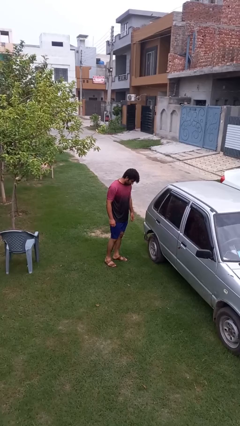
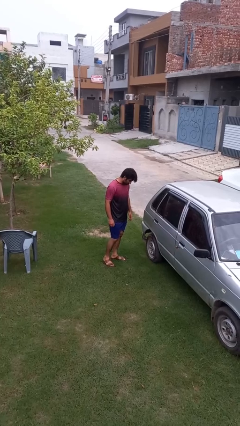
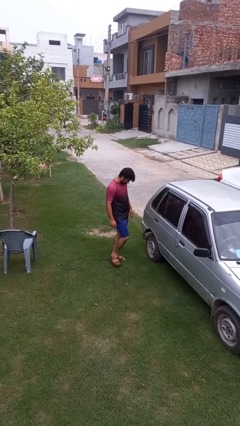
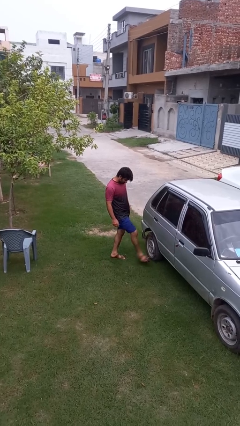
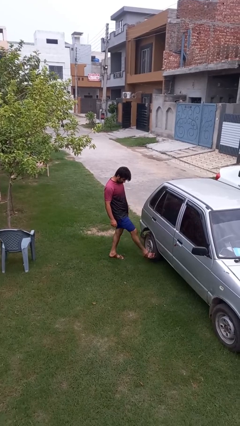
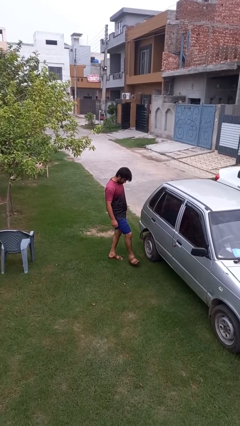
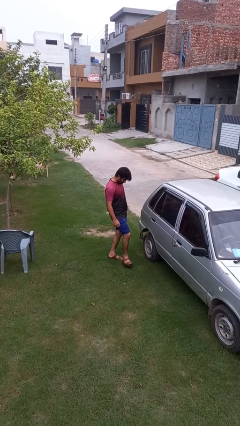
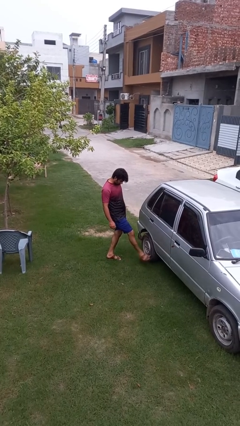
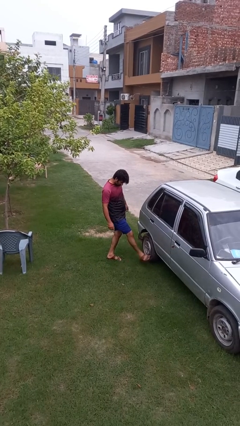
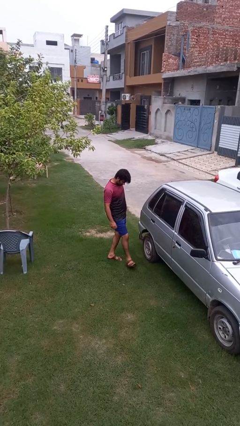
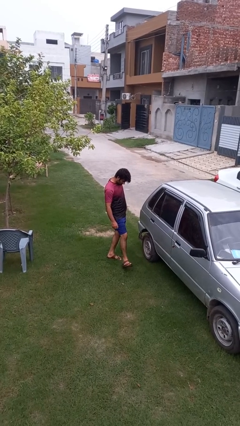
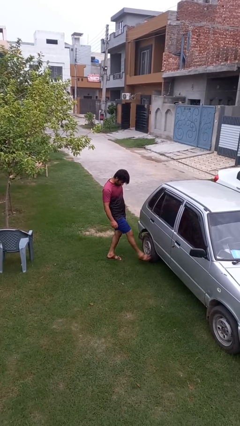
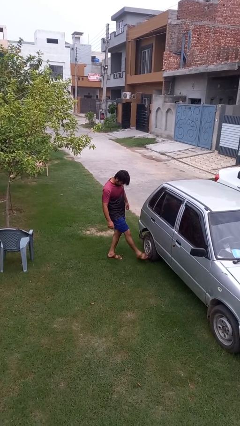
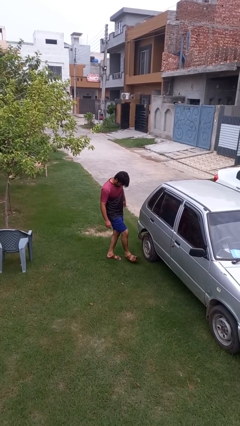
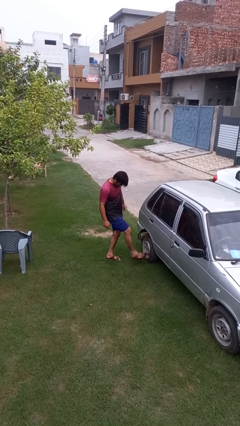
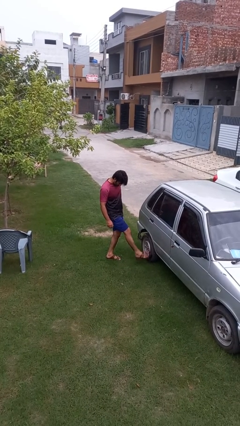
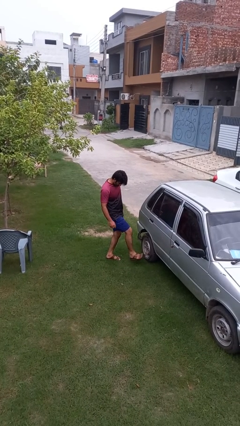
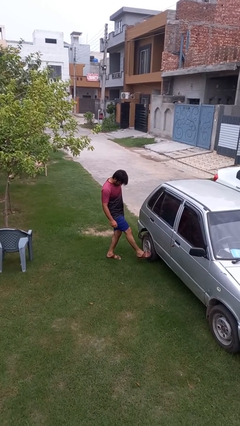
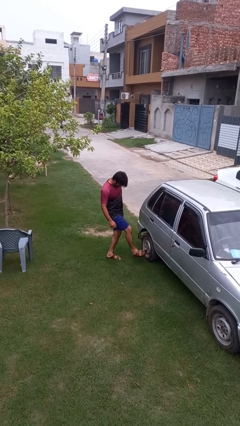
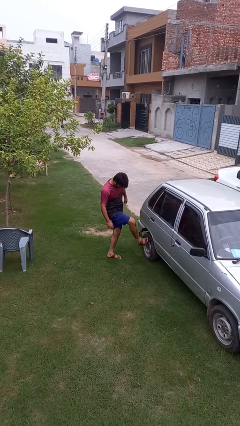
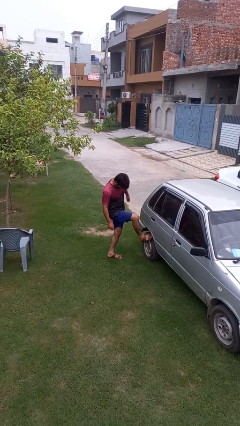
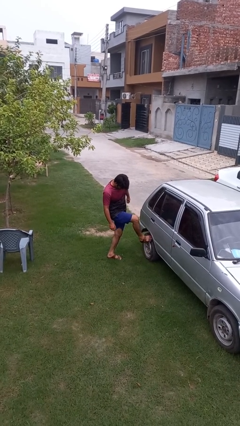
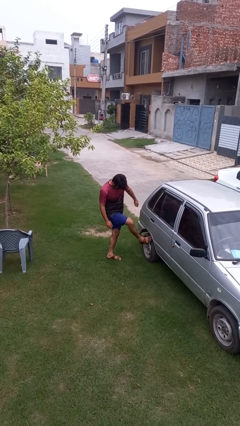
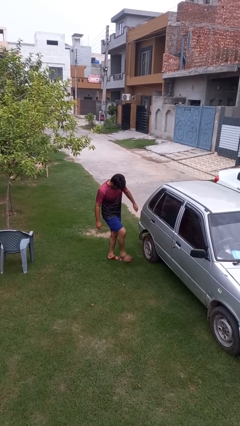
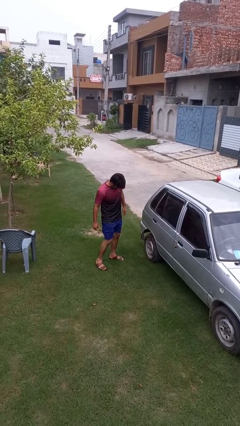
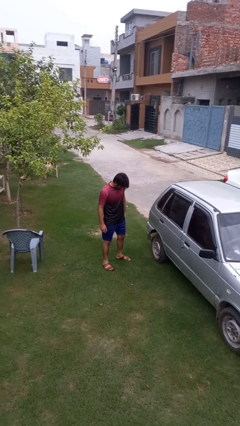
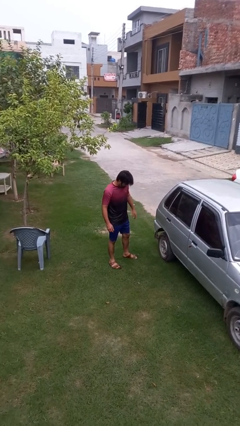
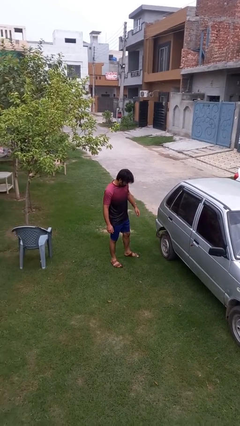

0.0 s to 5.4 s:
person kicks car tires

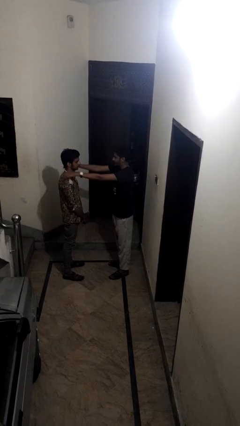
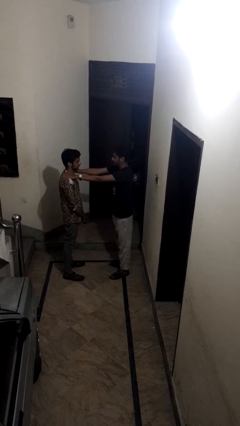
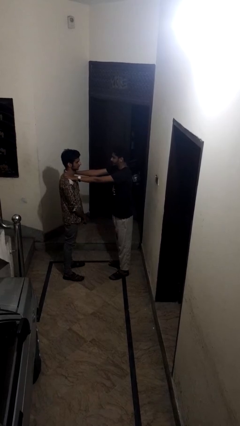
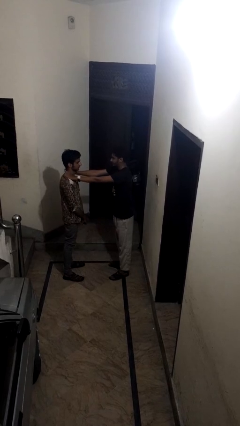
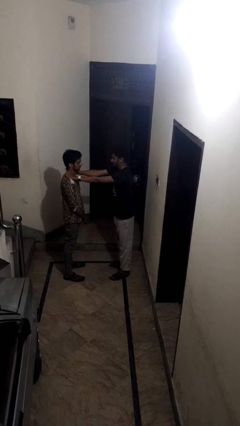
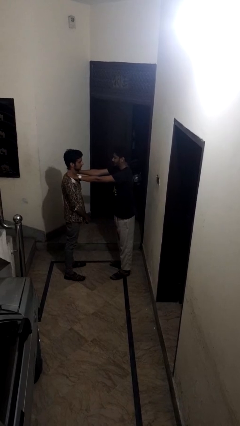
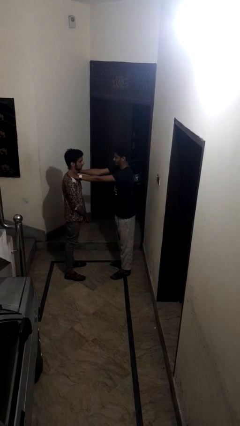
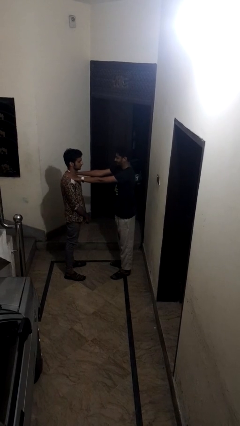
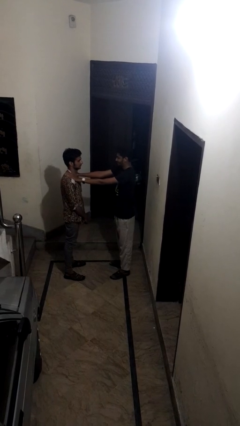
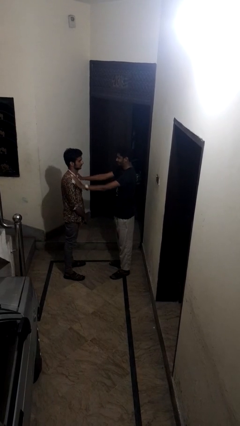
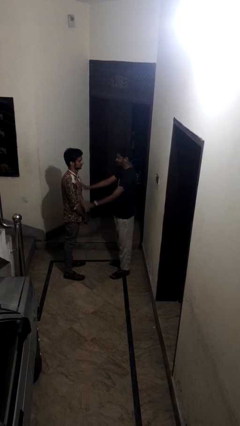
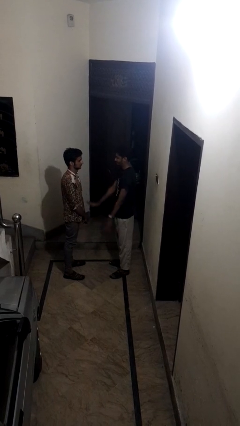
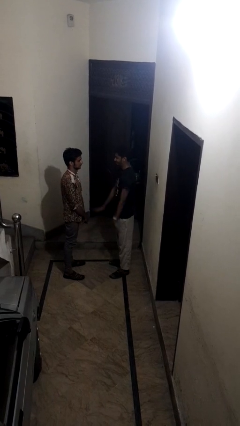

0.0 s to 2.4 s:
person pounds shoulders of person

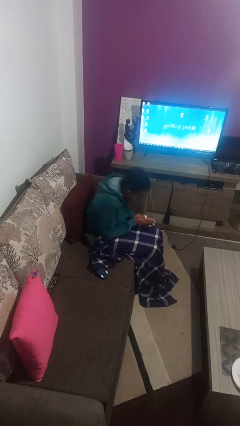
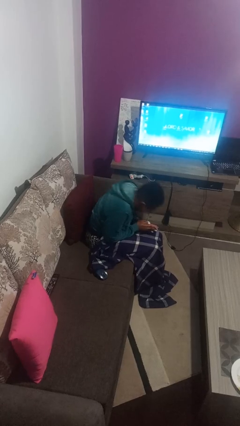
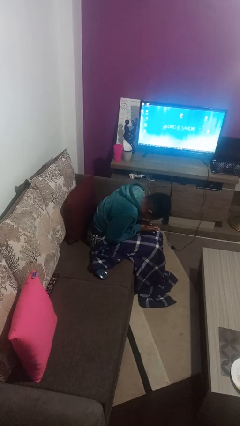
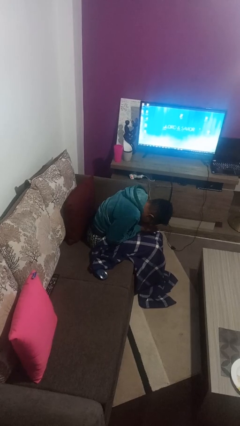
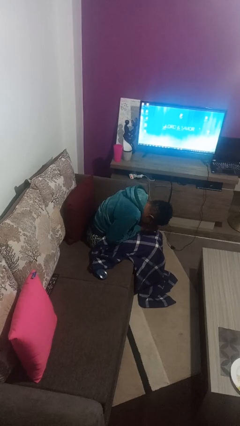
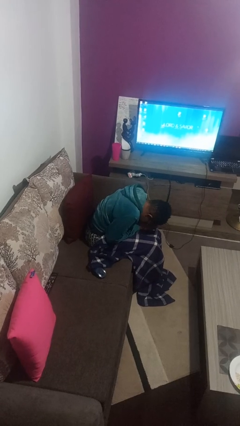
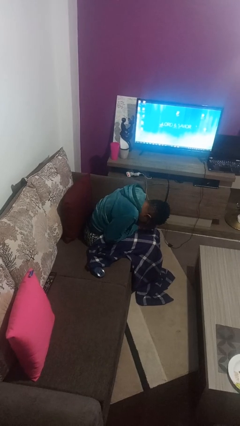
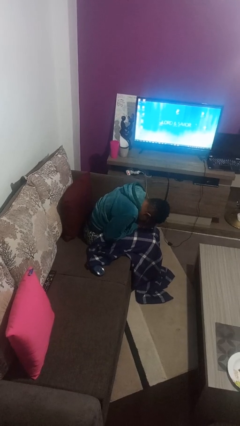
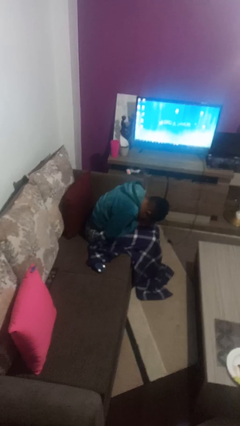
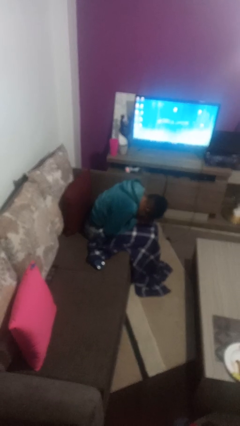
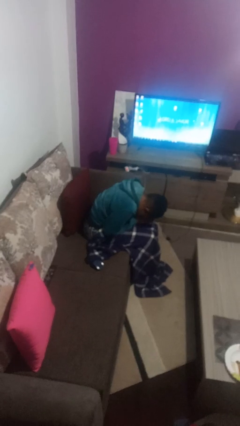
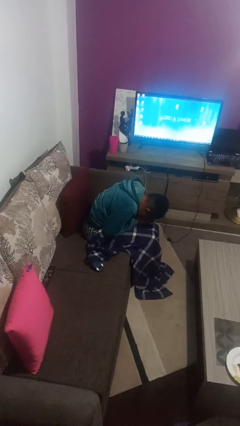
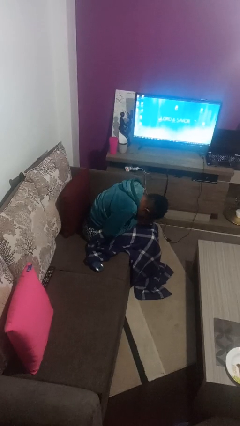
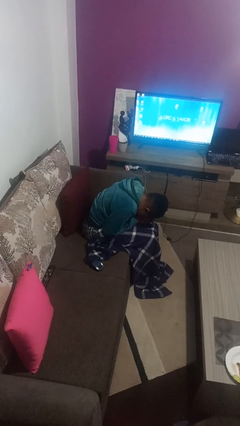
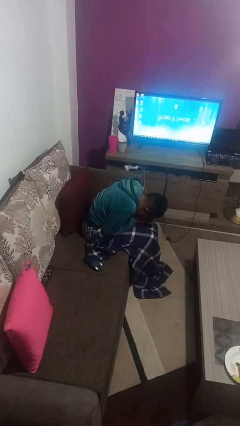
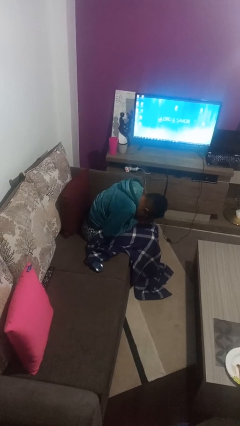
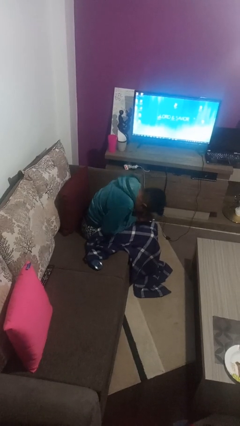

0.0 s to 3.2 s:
person prays

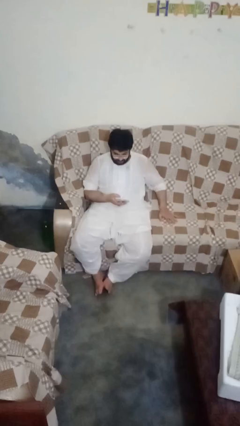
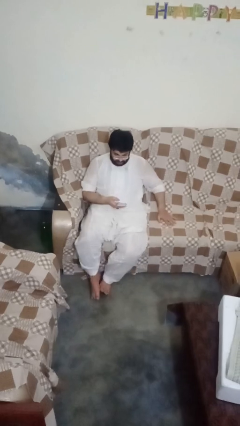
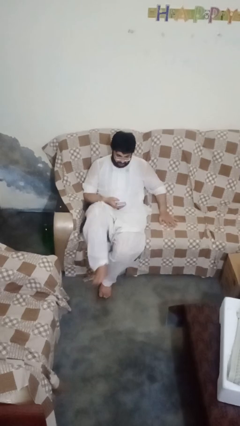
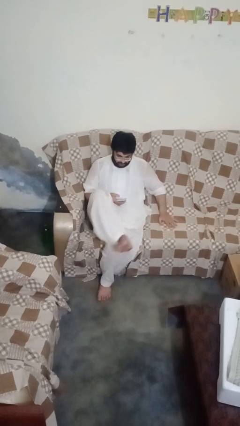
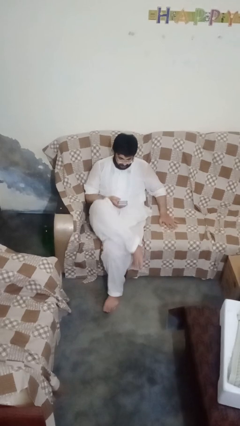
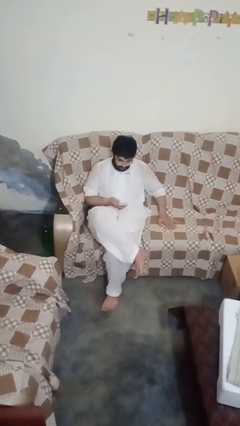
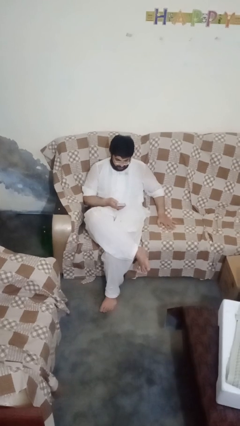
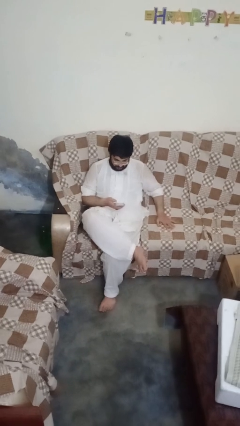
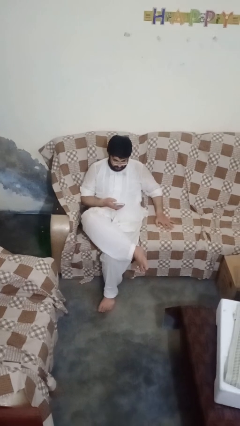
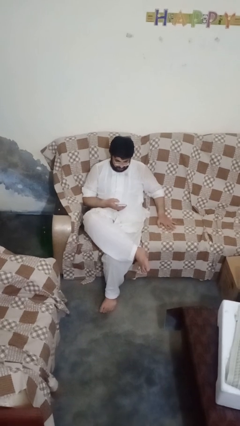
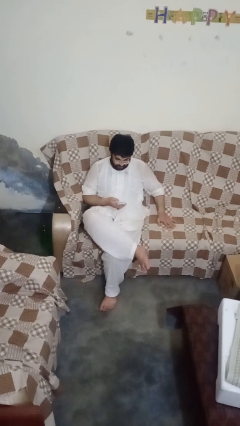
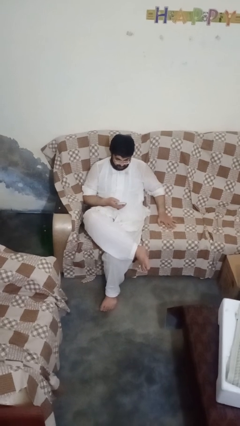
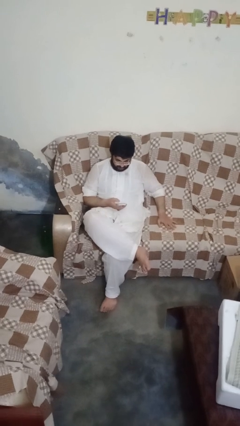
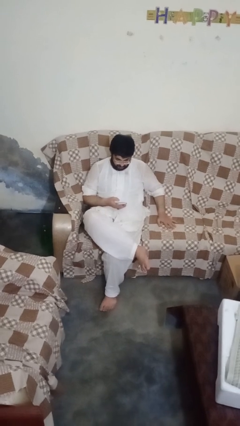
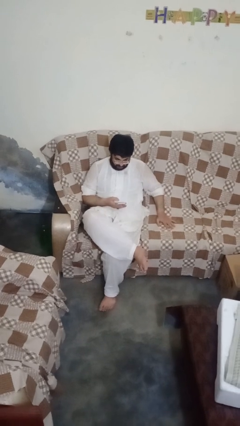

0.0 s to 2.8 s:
person crosses legs

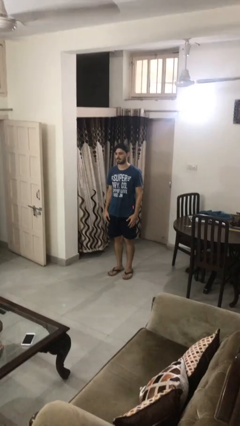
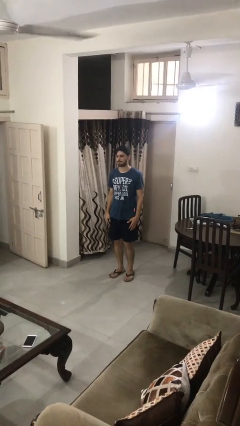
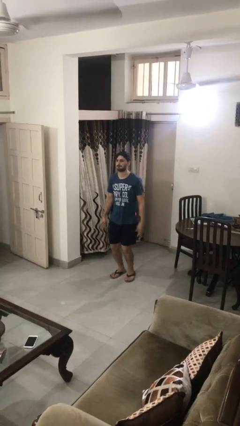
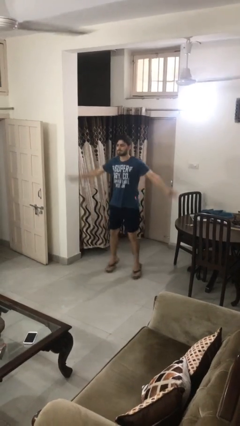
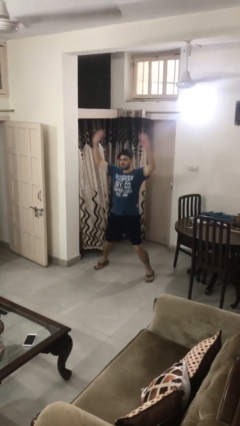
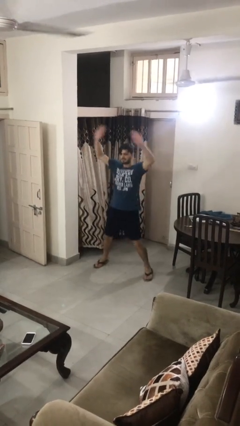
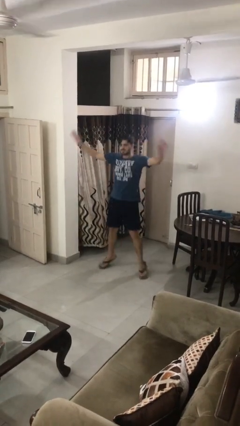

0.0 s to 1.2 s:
person exercises with jumping jacks

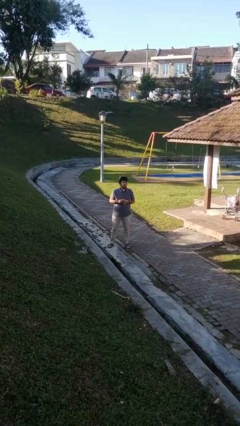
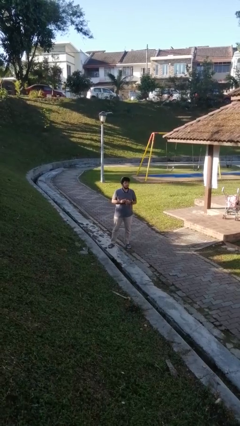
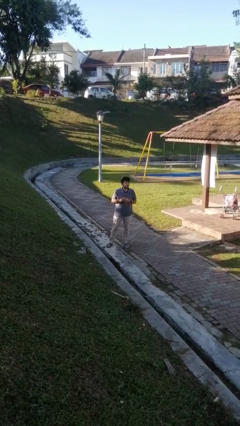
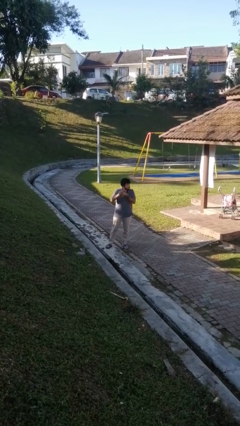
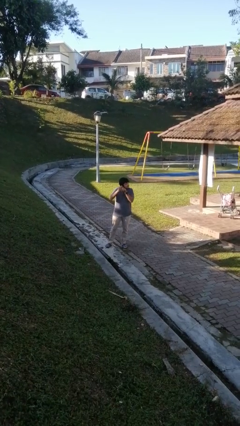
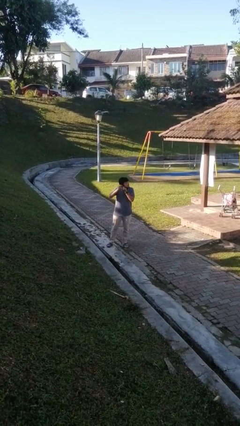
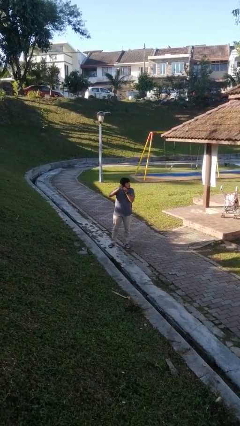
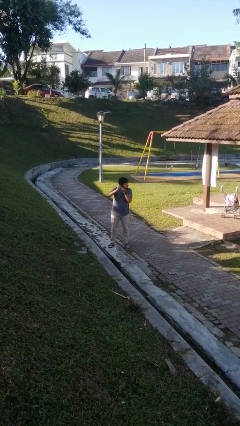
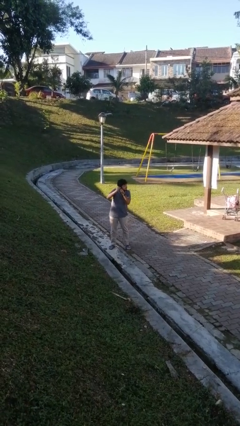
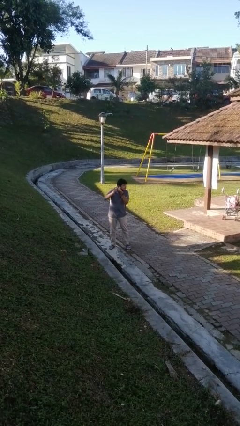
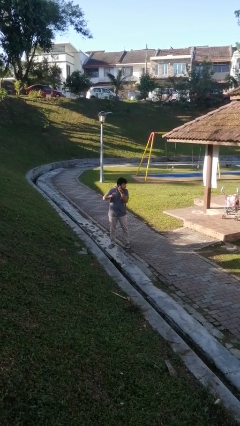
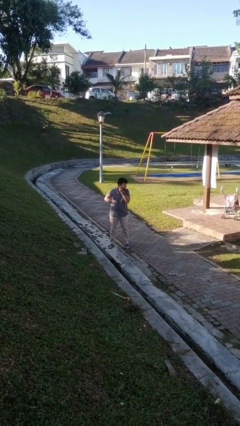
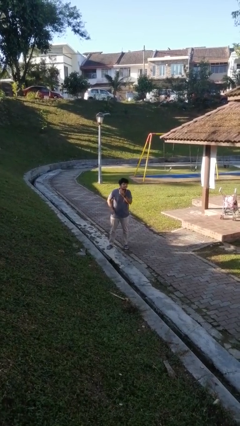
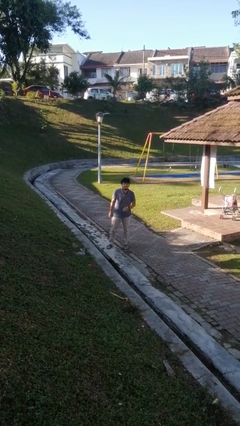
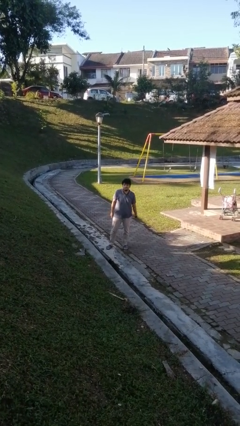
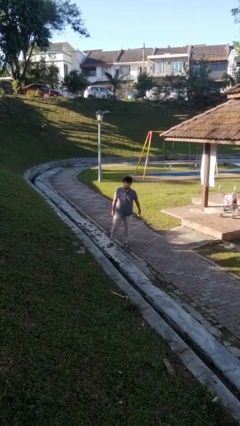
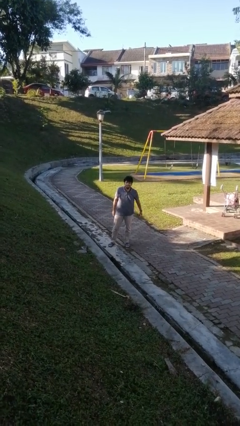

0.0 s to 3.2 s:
person puts on earrings
